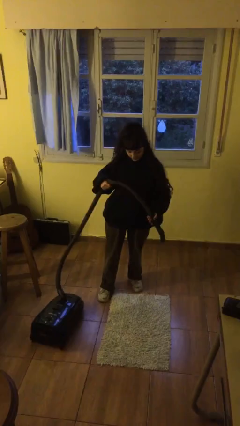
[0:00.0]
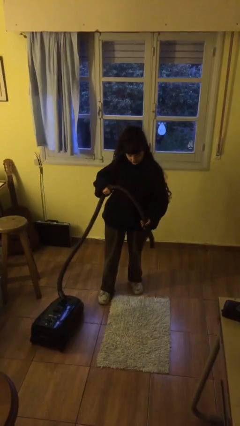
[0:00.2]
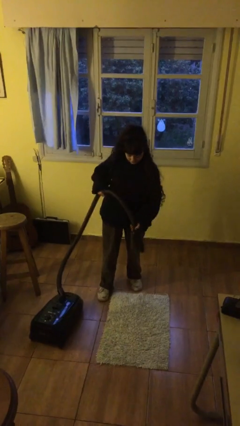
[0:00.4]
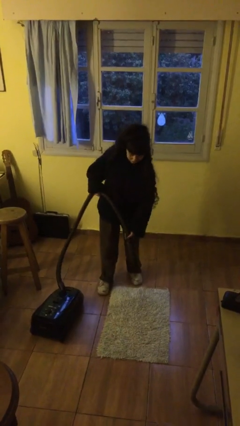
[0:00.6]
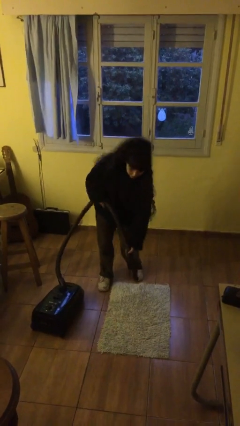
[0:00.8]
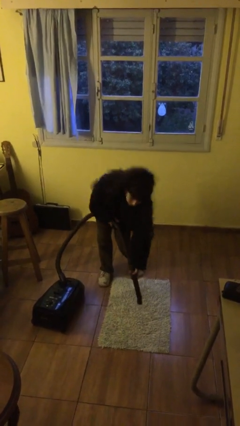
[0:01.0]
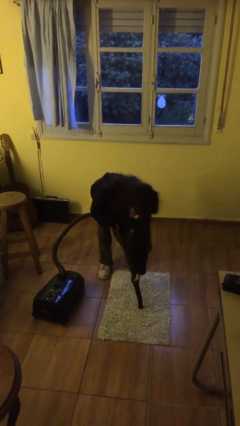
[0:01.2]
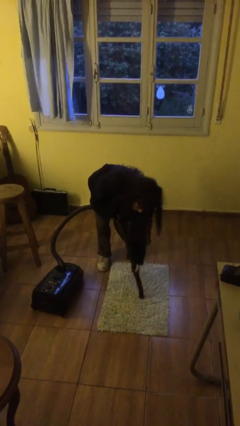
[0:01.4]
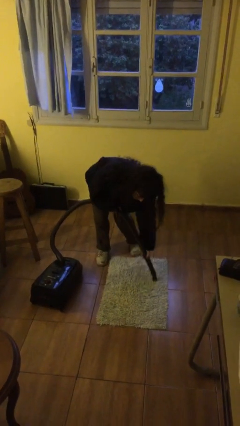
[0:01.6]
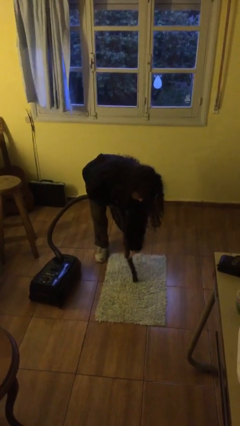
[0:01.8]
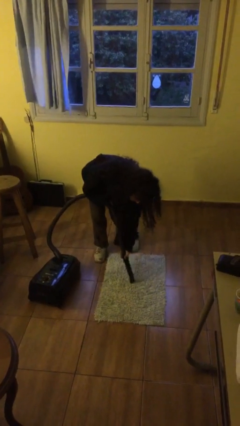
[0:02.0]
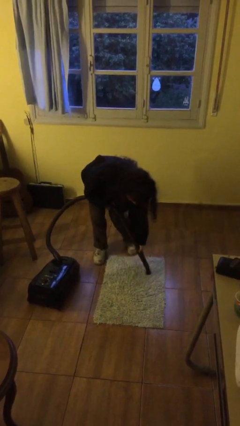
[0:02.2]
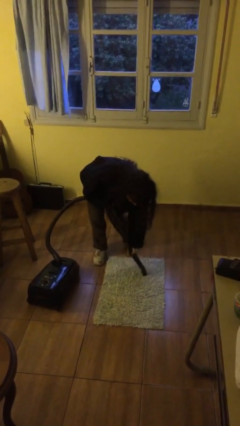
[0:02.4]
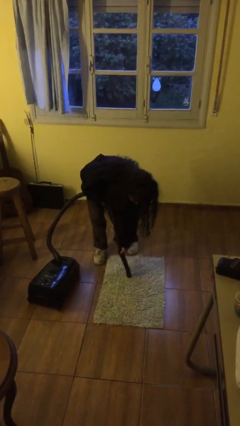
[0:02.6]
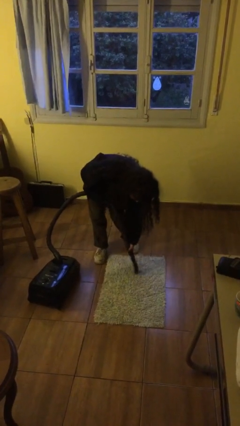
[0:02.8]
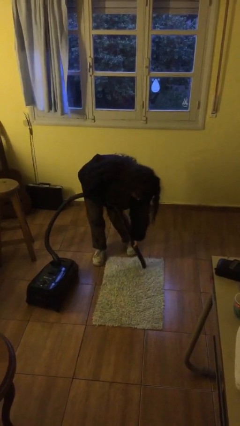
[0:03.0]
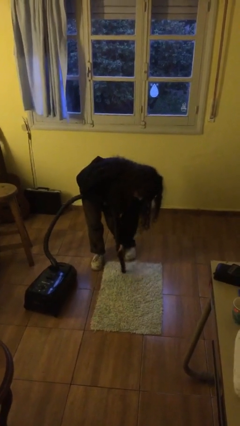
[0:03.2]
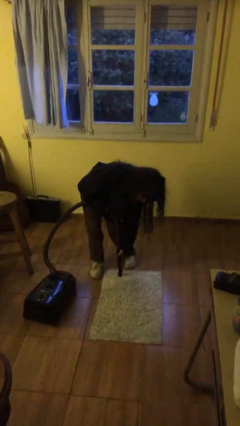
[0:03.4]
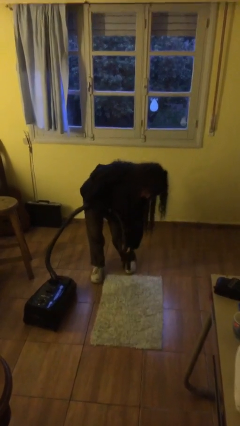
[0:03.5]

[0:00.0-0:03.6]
person vacuums carpet

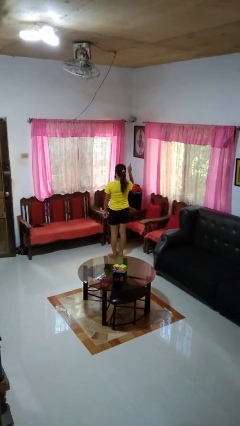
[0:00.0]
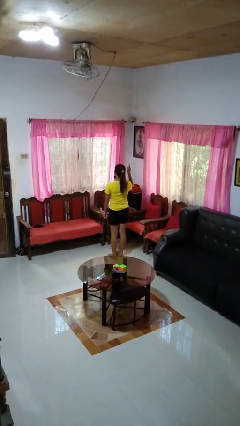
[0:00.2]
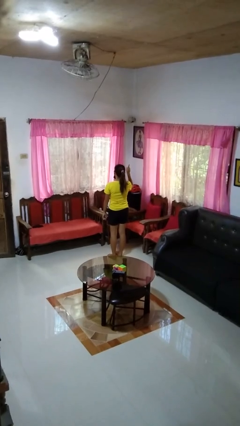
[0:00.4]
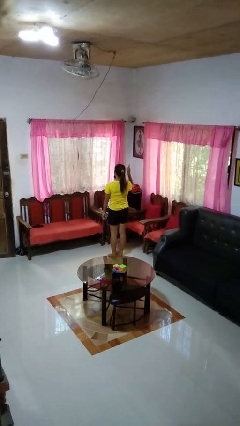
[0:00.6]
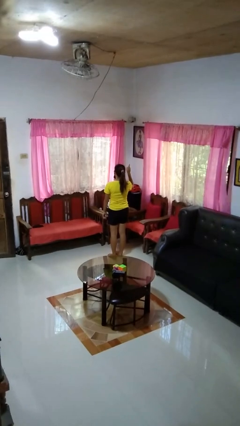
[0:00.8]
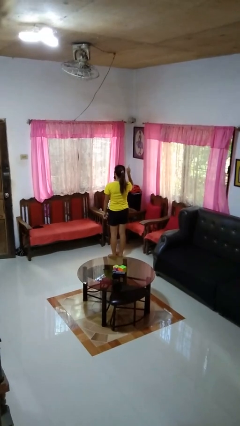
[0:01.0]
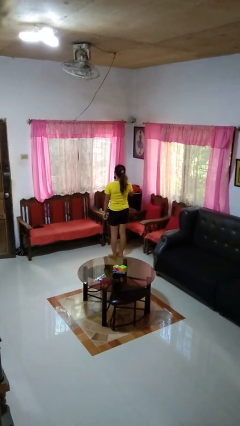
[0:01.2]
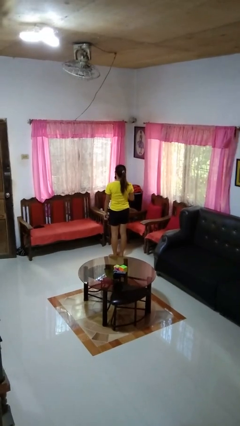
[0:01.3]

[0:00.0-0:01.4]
person gestures number one

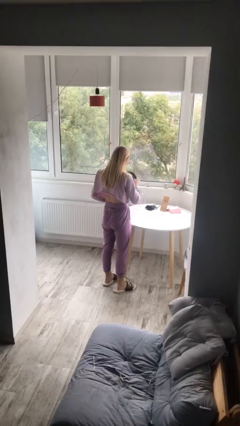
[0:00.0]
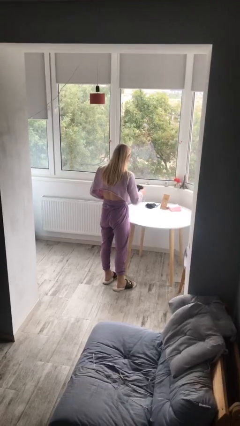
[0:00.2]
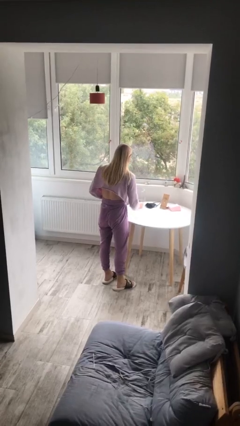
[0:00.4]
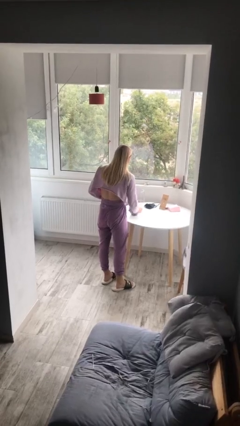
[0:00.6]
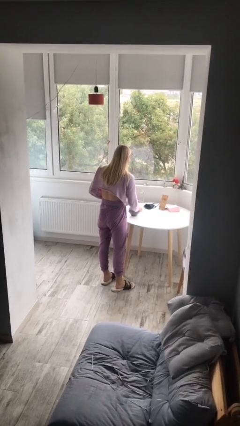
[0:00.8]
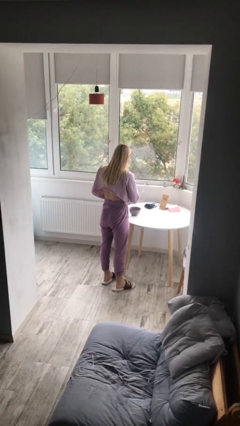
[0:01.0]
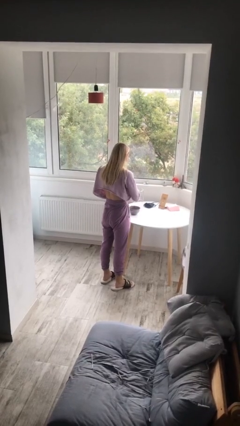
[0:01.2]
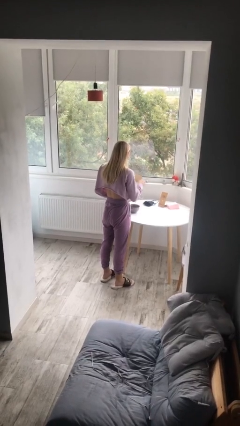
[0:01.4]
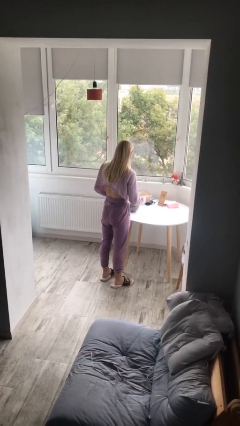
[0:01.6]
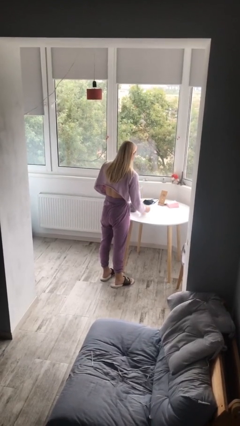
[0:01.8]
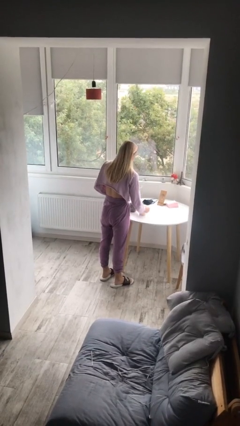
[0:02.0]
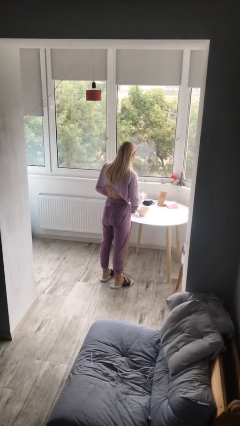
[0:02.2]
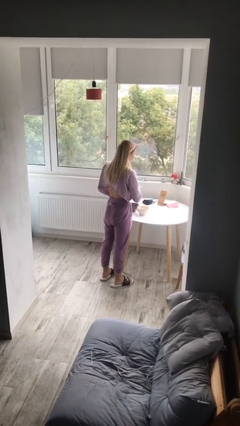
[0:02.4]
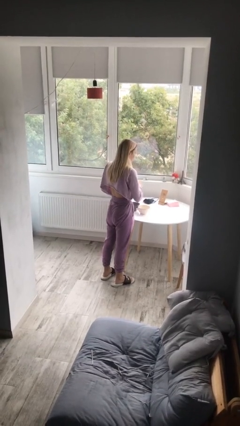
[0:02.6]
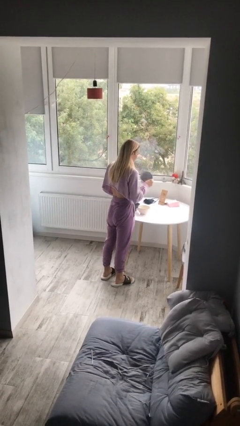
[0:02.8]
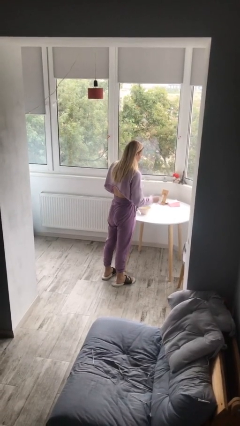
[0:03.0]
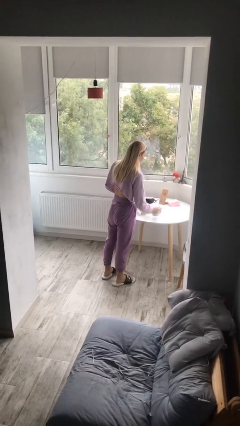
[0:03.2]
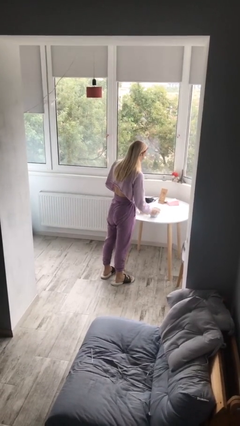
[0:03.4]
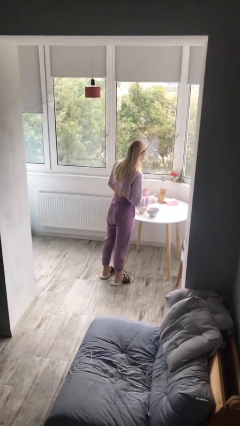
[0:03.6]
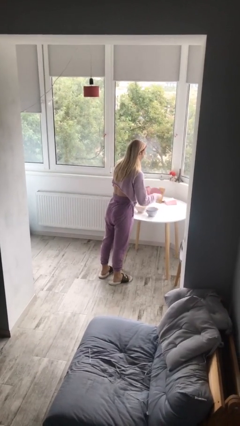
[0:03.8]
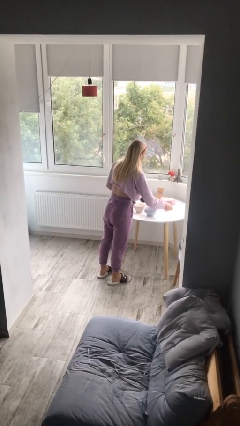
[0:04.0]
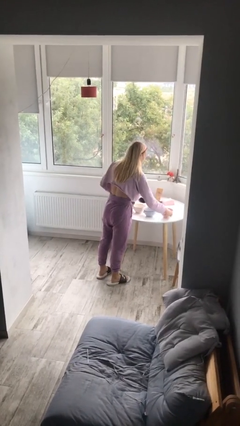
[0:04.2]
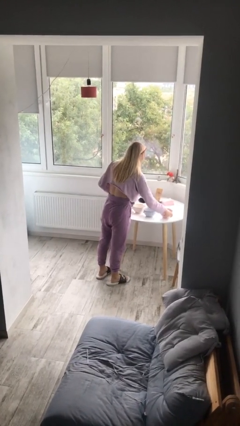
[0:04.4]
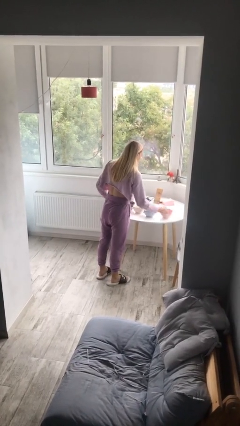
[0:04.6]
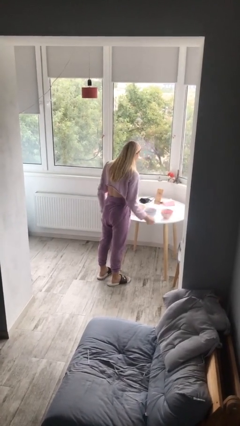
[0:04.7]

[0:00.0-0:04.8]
person sets table

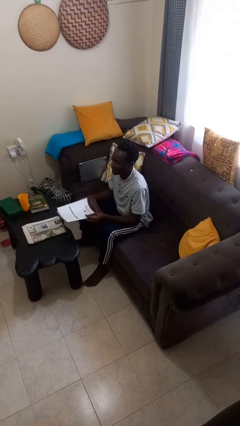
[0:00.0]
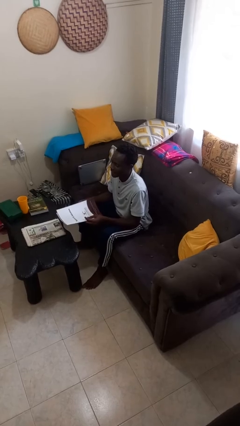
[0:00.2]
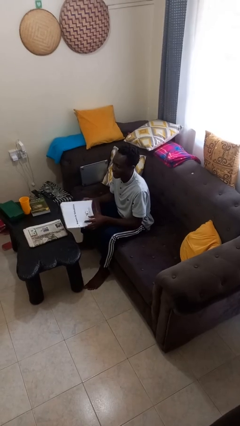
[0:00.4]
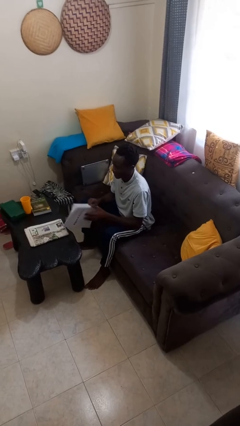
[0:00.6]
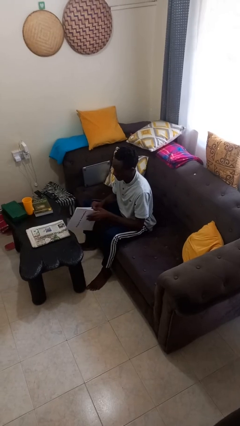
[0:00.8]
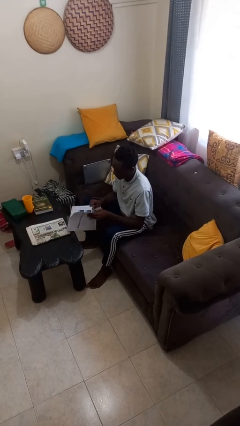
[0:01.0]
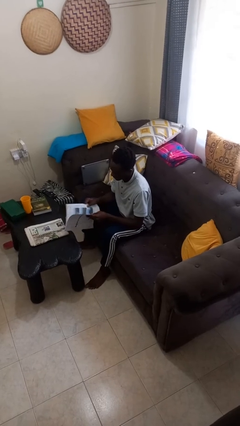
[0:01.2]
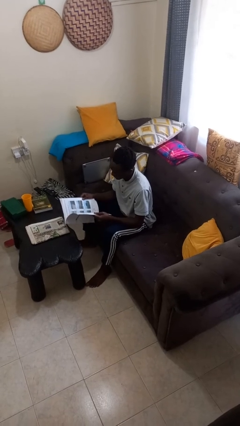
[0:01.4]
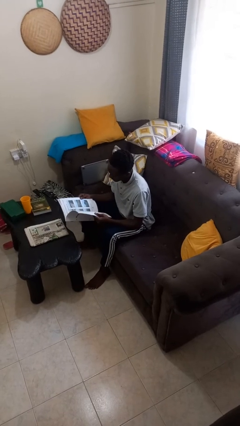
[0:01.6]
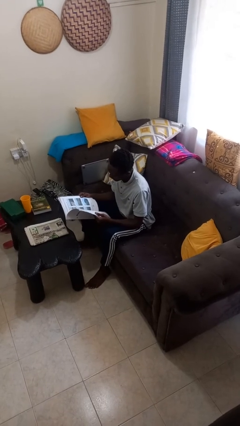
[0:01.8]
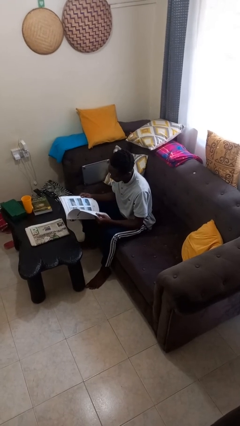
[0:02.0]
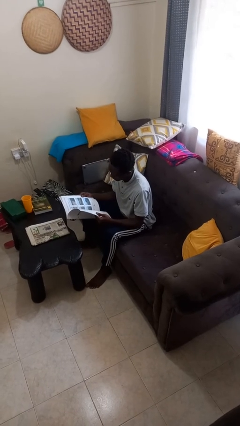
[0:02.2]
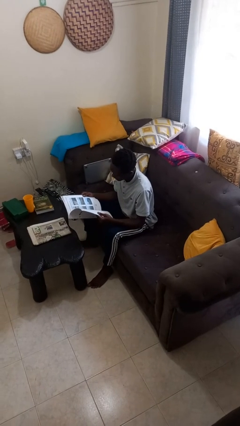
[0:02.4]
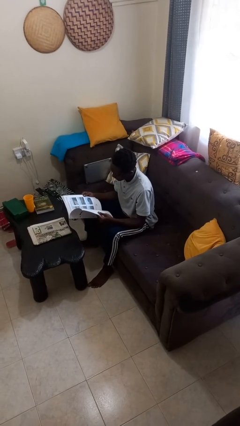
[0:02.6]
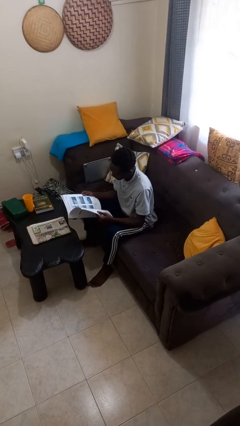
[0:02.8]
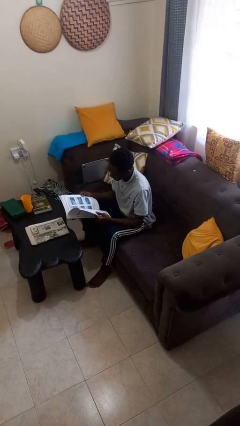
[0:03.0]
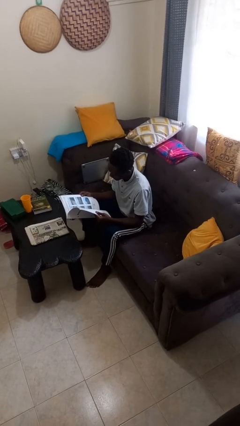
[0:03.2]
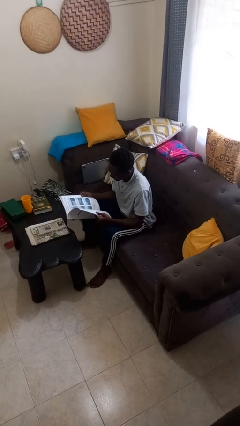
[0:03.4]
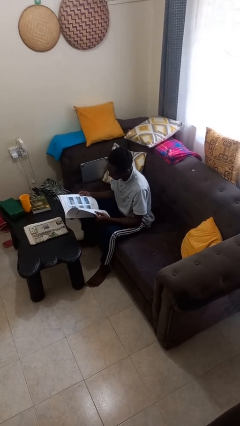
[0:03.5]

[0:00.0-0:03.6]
person reads magazine

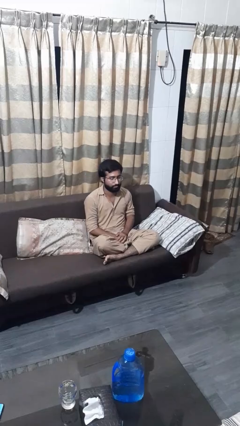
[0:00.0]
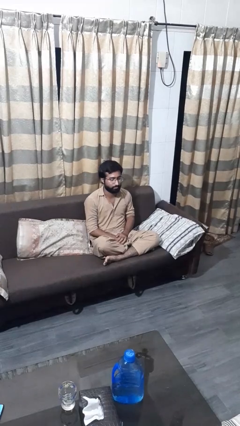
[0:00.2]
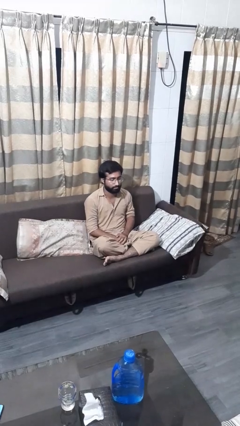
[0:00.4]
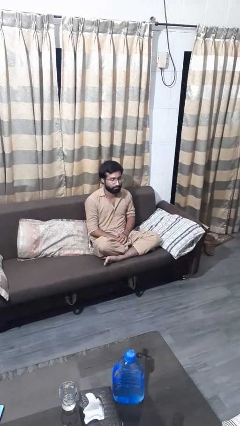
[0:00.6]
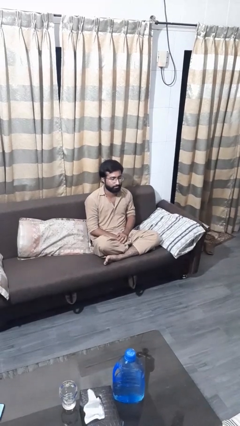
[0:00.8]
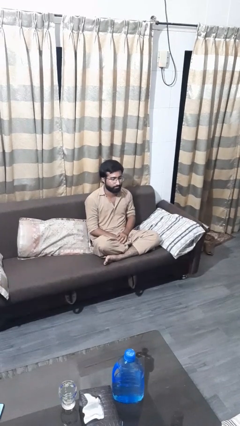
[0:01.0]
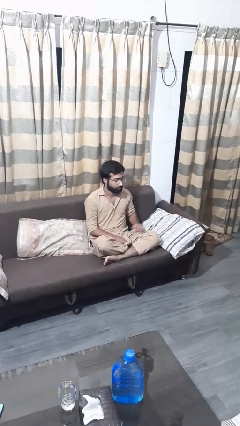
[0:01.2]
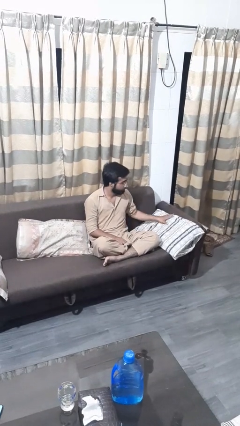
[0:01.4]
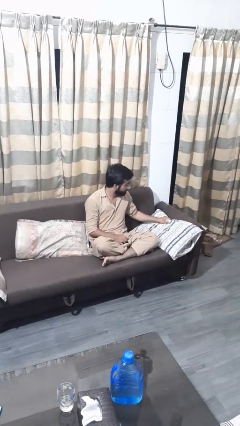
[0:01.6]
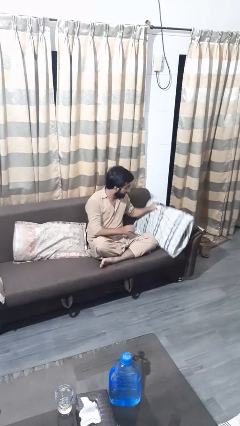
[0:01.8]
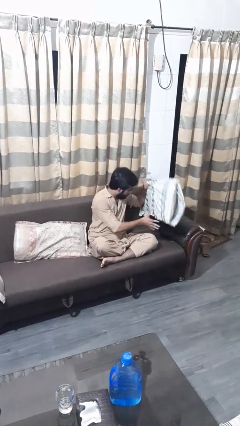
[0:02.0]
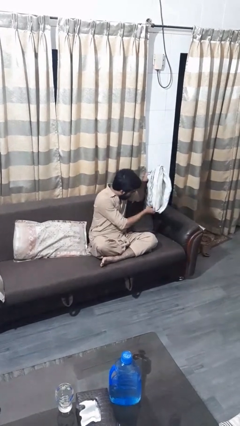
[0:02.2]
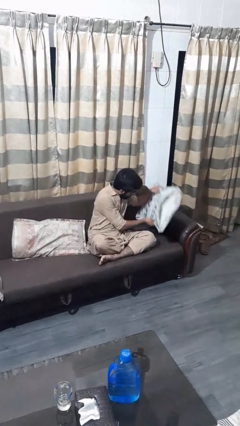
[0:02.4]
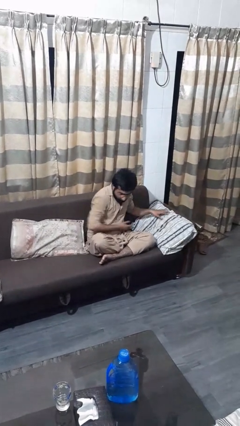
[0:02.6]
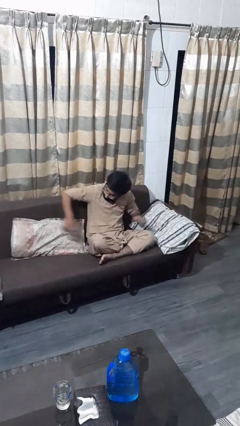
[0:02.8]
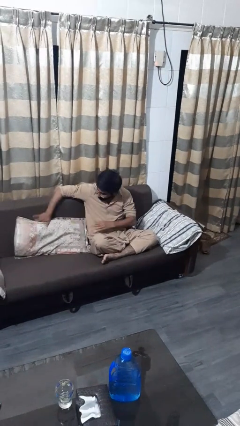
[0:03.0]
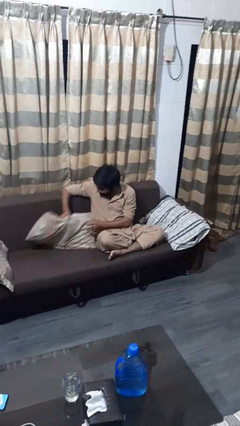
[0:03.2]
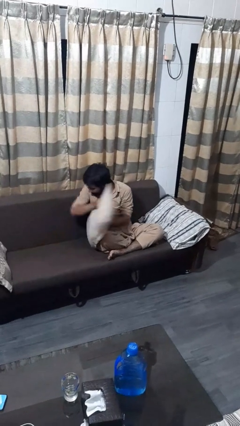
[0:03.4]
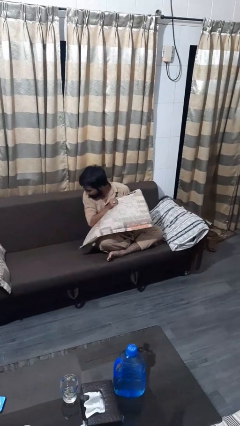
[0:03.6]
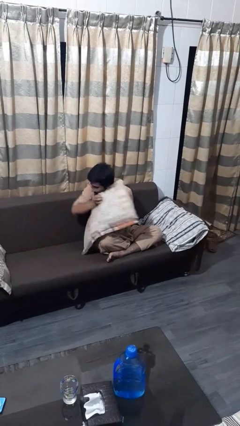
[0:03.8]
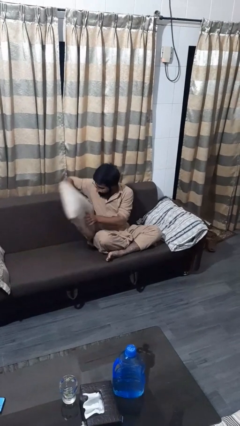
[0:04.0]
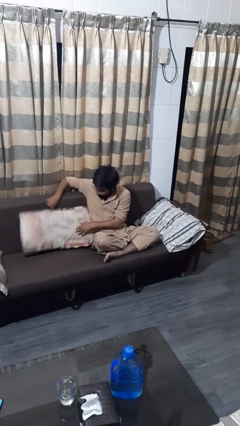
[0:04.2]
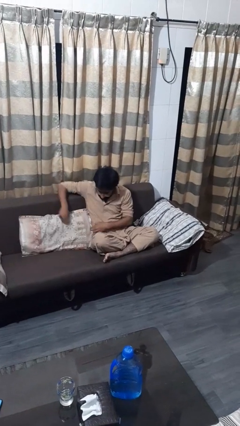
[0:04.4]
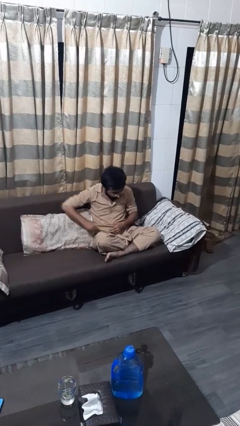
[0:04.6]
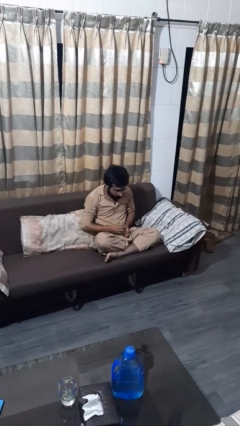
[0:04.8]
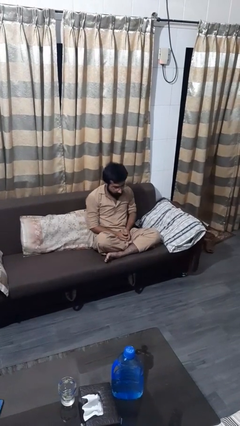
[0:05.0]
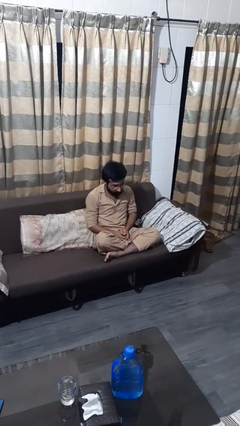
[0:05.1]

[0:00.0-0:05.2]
person searches in couch
